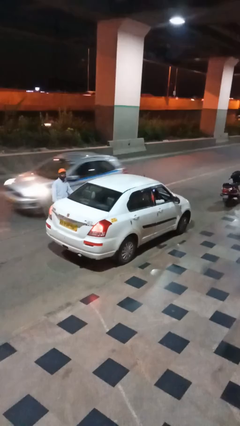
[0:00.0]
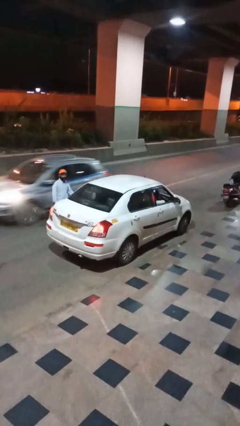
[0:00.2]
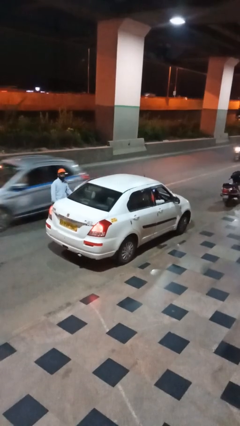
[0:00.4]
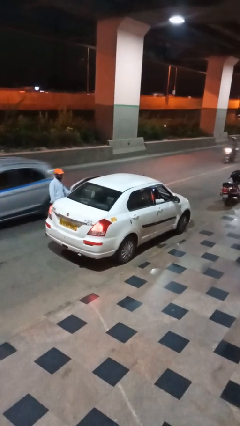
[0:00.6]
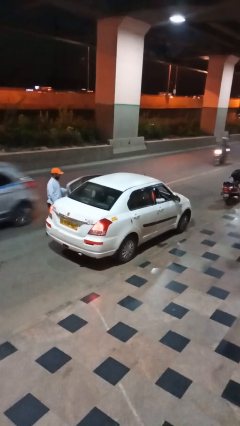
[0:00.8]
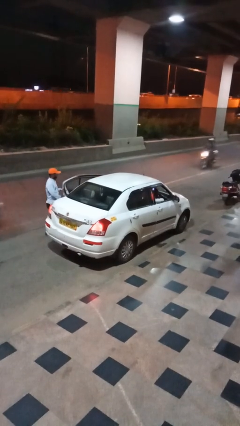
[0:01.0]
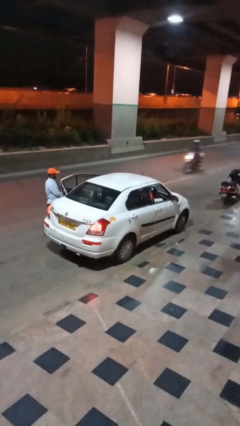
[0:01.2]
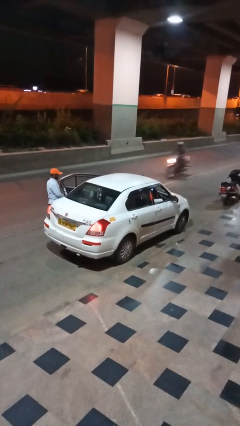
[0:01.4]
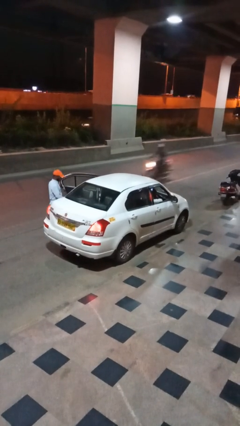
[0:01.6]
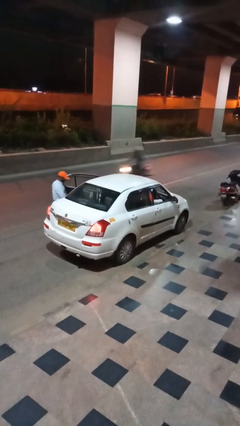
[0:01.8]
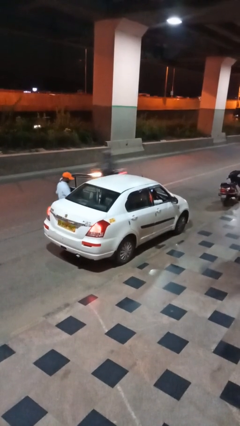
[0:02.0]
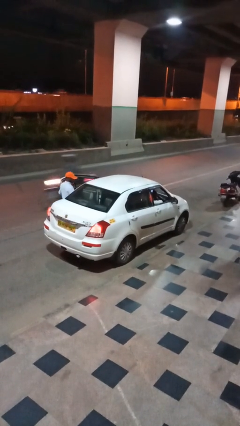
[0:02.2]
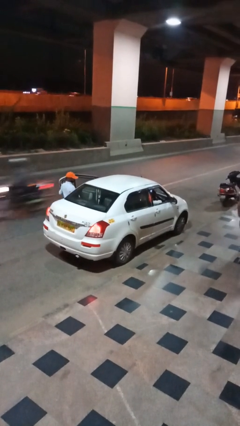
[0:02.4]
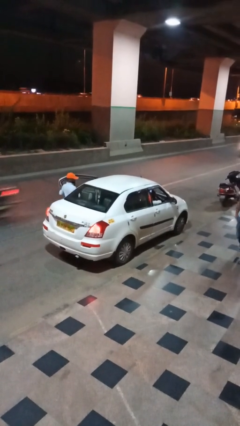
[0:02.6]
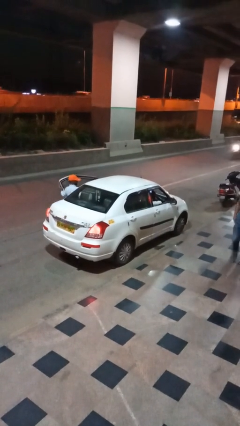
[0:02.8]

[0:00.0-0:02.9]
car picks up person

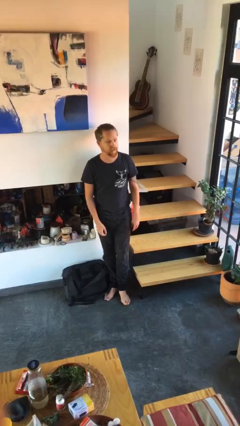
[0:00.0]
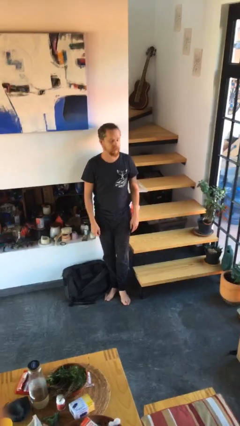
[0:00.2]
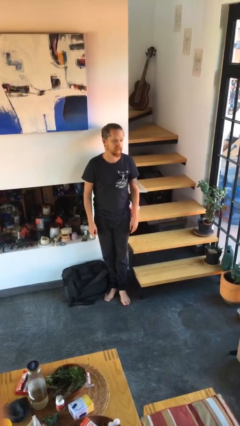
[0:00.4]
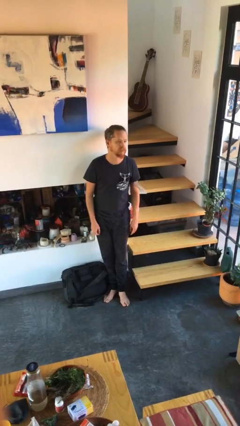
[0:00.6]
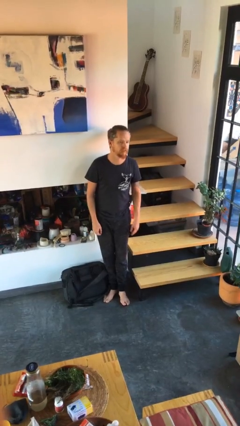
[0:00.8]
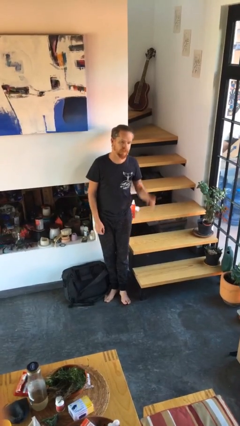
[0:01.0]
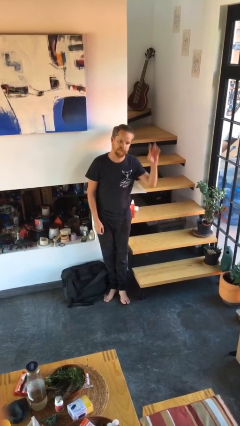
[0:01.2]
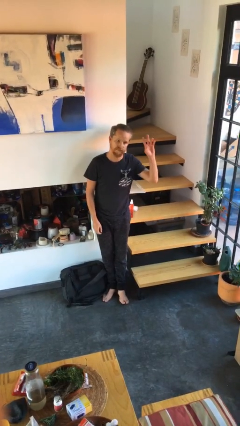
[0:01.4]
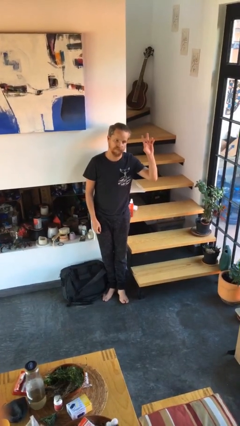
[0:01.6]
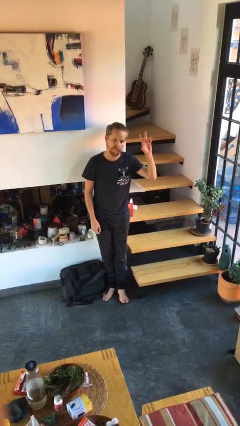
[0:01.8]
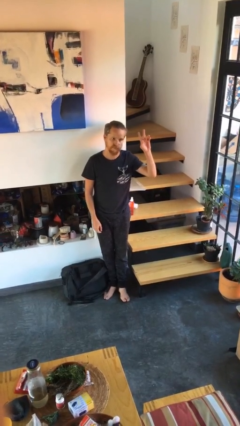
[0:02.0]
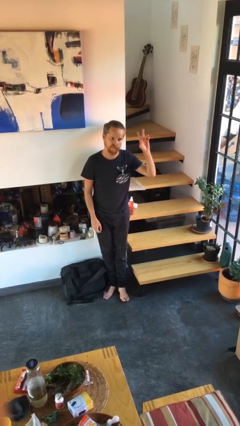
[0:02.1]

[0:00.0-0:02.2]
person gestures raise hand

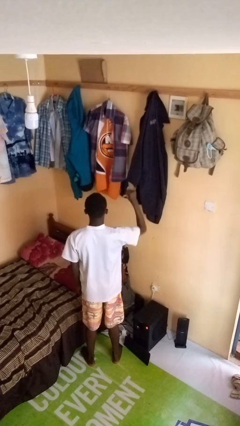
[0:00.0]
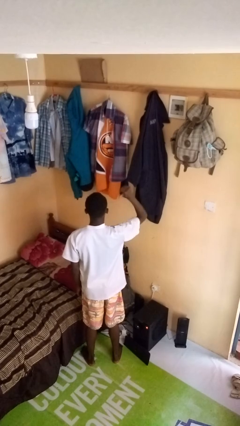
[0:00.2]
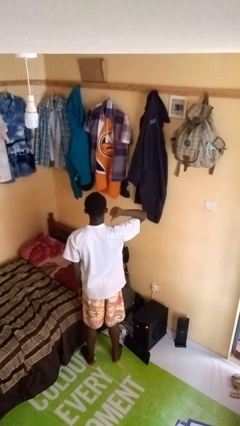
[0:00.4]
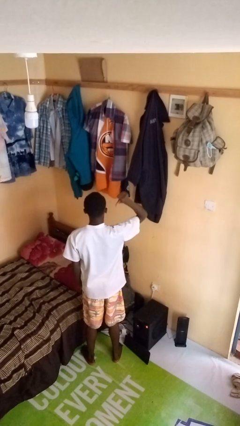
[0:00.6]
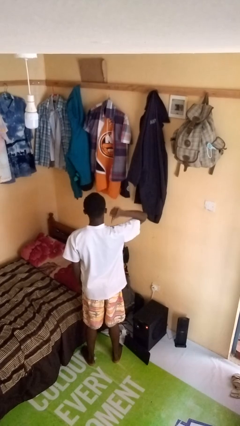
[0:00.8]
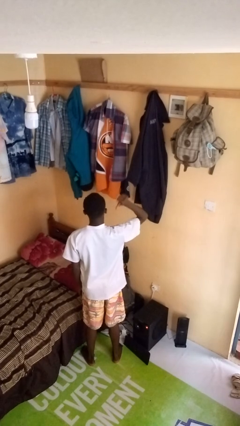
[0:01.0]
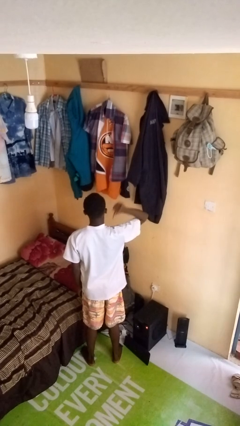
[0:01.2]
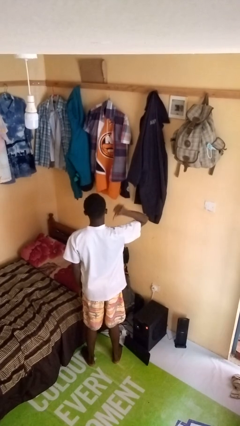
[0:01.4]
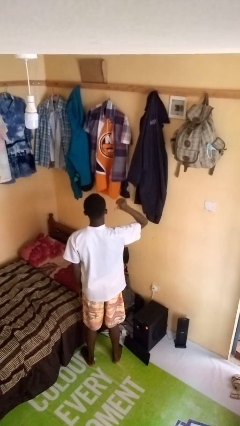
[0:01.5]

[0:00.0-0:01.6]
person gestures behind me

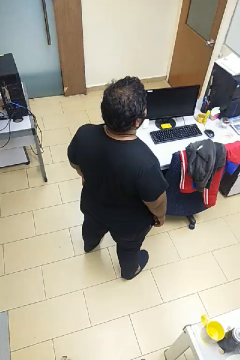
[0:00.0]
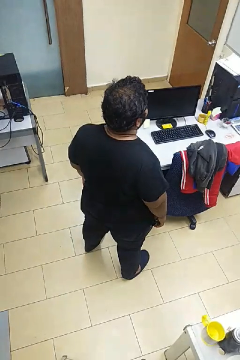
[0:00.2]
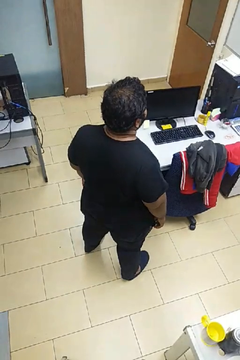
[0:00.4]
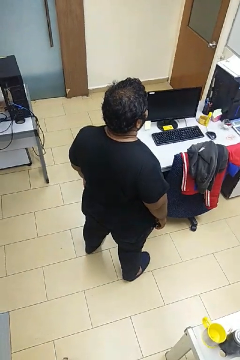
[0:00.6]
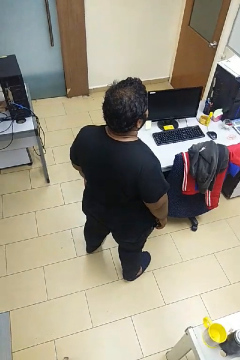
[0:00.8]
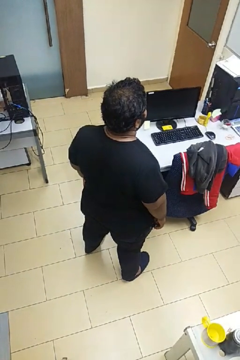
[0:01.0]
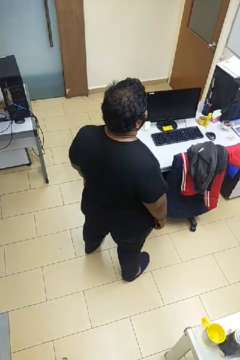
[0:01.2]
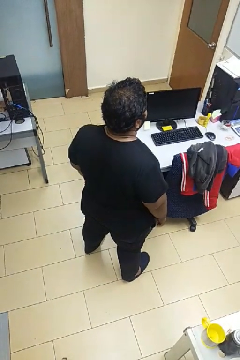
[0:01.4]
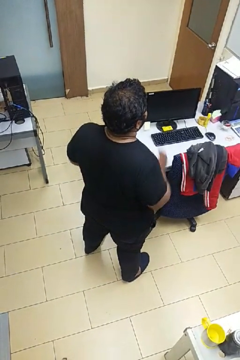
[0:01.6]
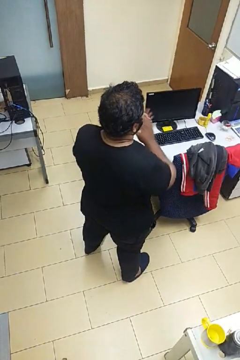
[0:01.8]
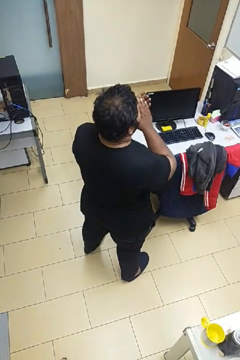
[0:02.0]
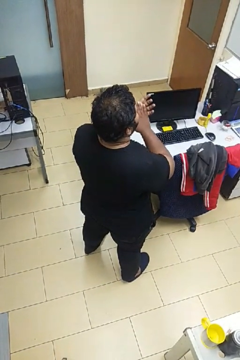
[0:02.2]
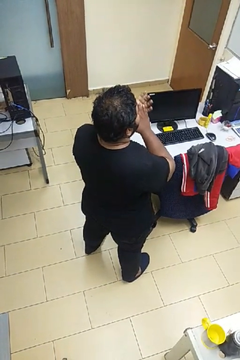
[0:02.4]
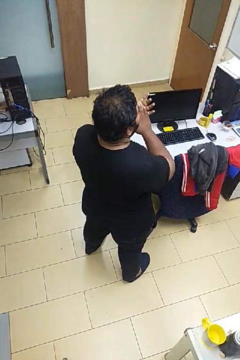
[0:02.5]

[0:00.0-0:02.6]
person claps hands

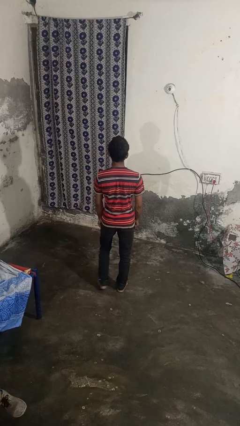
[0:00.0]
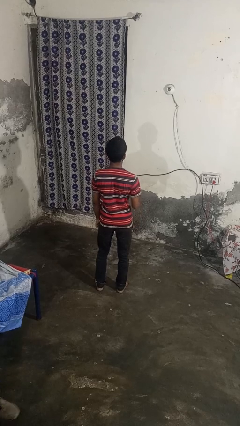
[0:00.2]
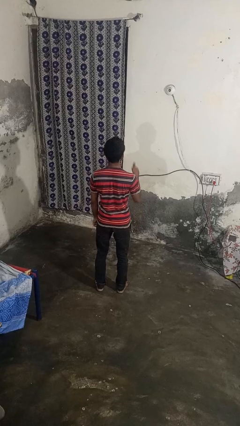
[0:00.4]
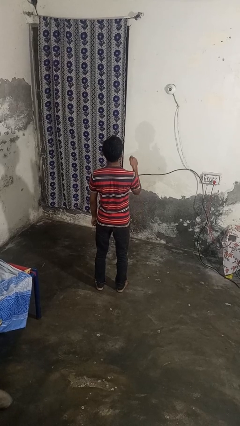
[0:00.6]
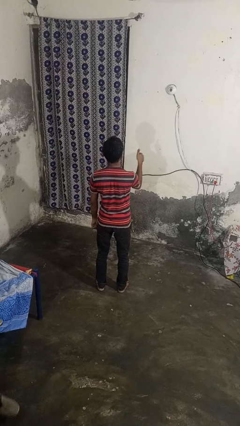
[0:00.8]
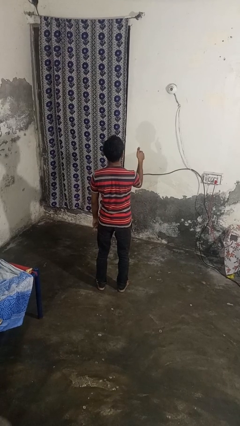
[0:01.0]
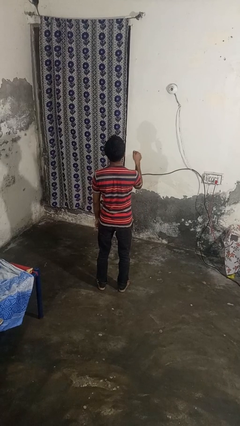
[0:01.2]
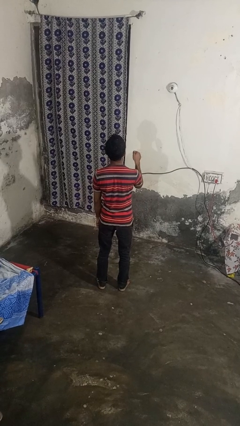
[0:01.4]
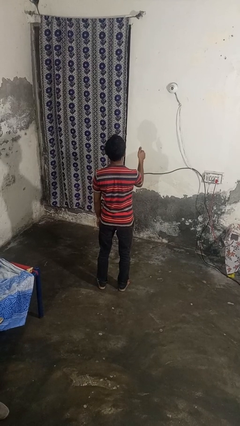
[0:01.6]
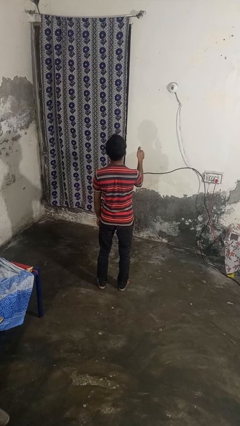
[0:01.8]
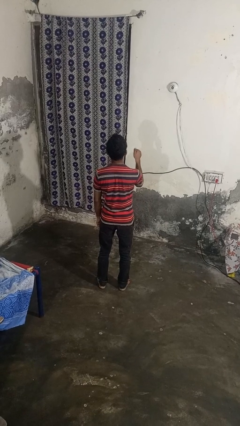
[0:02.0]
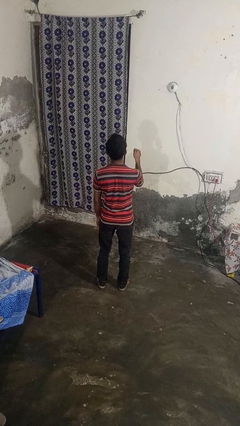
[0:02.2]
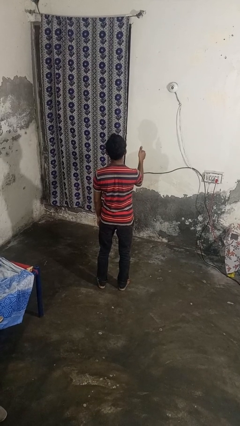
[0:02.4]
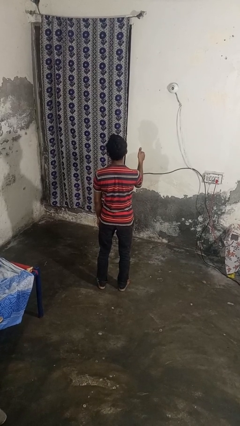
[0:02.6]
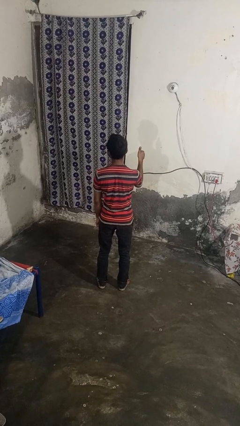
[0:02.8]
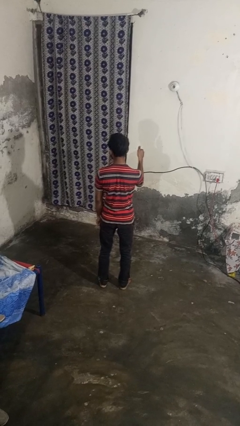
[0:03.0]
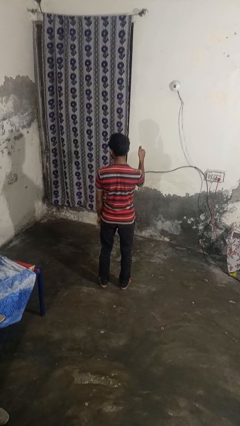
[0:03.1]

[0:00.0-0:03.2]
person gestures thumbs up

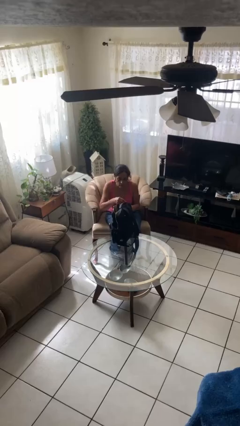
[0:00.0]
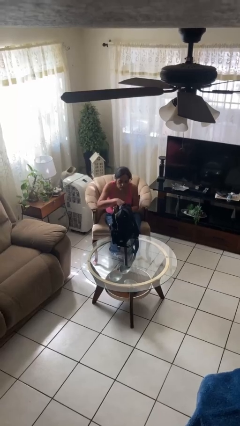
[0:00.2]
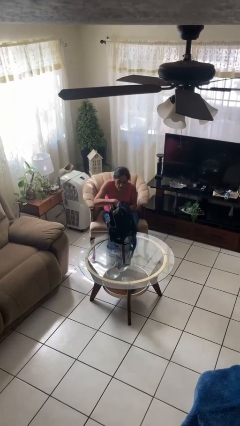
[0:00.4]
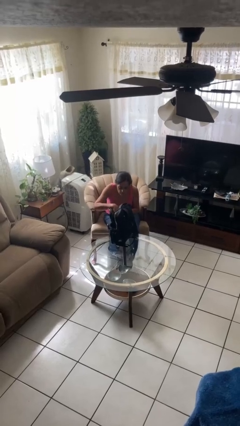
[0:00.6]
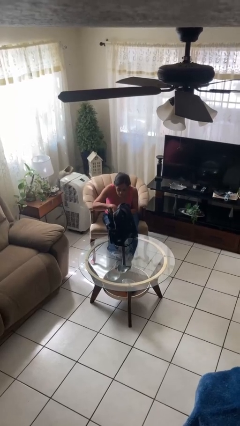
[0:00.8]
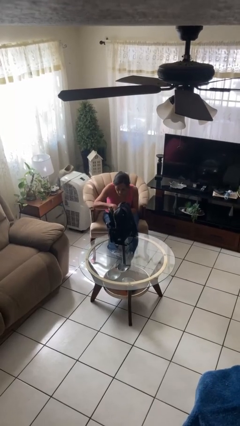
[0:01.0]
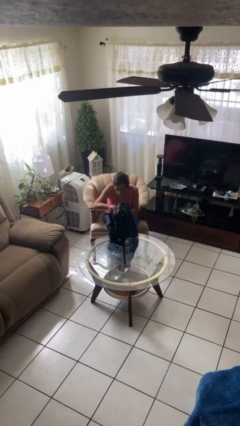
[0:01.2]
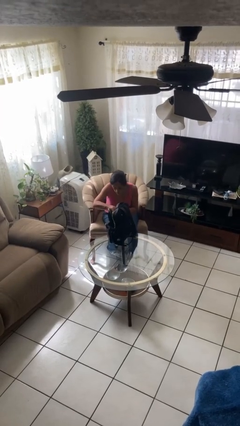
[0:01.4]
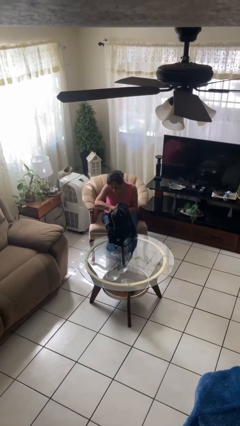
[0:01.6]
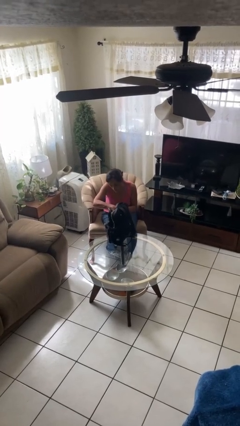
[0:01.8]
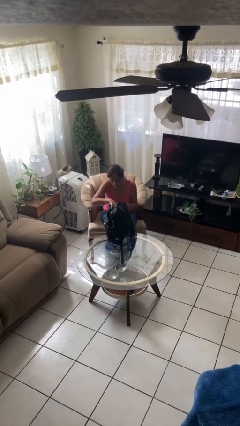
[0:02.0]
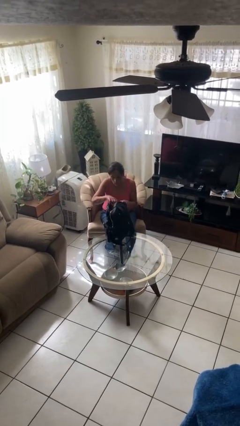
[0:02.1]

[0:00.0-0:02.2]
person searches in backpack

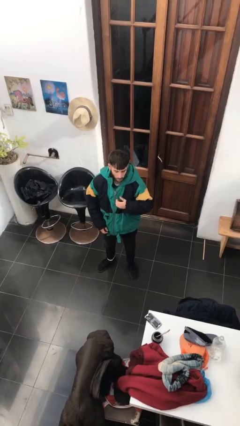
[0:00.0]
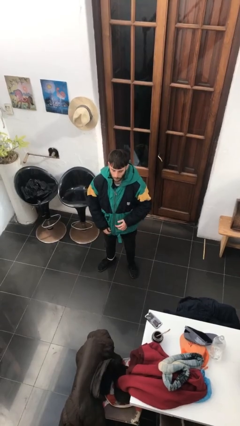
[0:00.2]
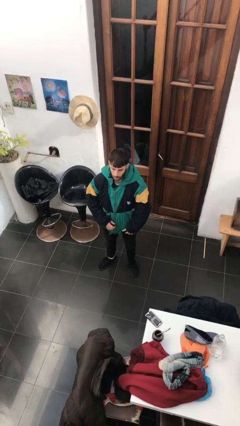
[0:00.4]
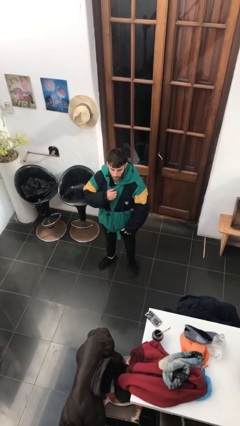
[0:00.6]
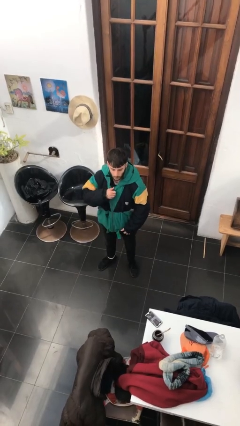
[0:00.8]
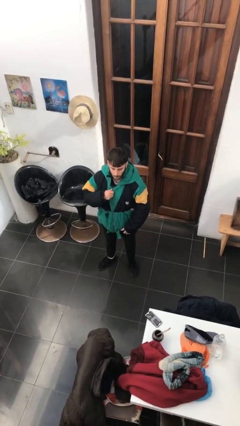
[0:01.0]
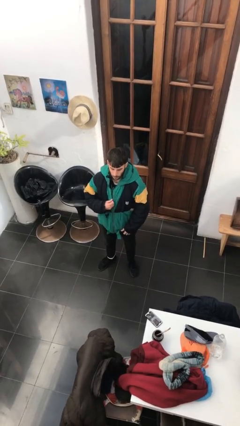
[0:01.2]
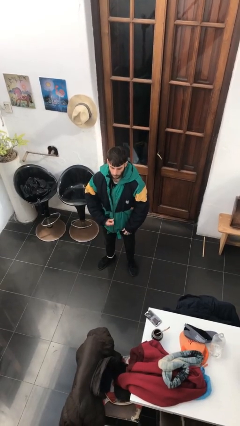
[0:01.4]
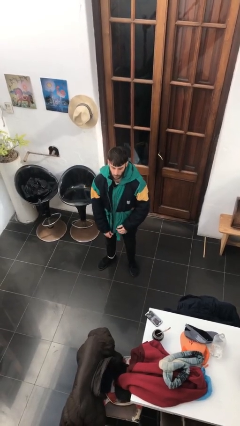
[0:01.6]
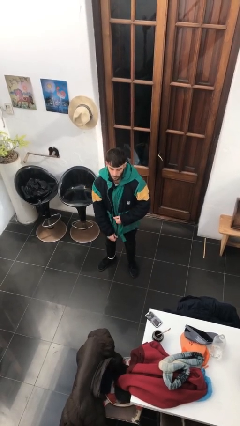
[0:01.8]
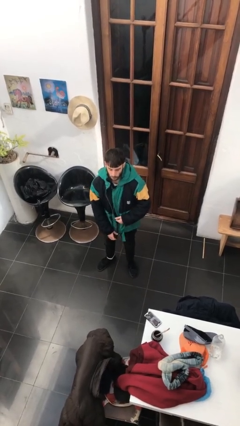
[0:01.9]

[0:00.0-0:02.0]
person unzips jacket

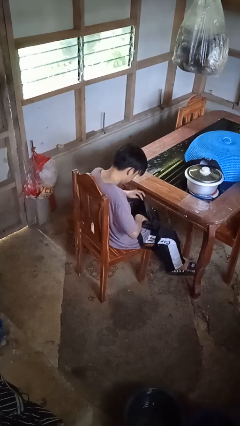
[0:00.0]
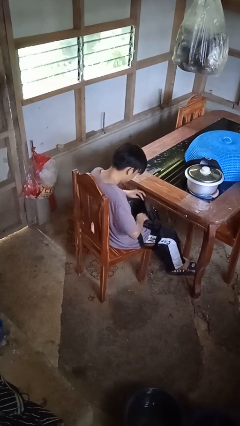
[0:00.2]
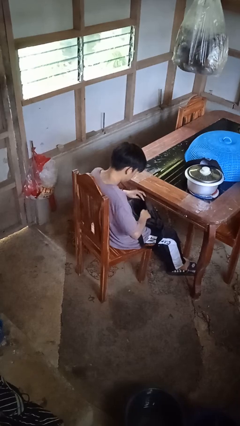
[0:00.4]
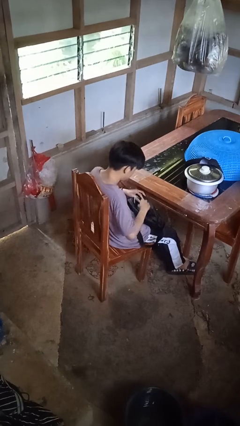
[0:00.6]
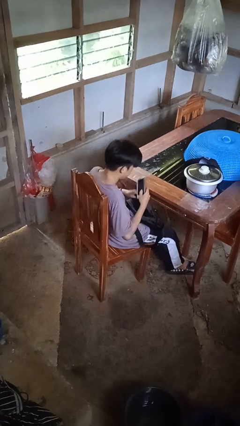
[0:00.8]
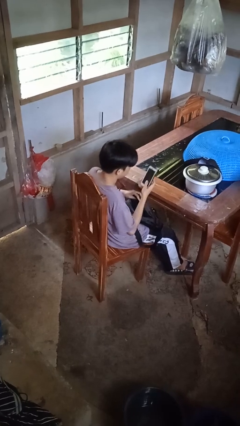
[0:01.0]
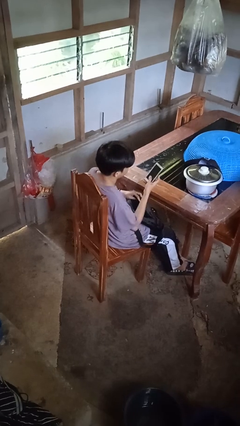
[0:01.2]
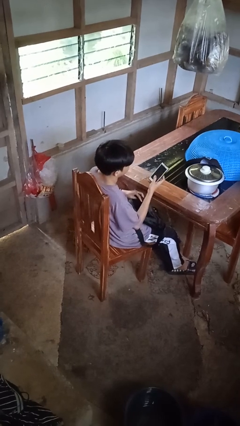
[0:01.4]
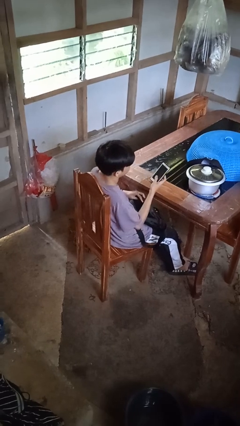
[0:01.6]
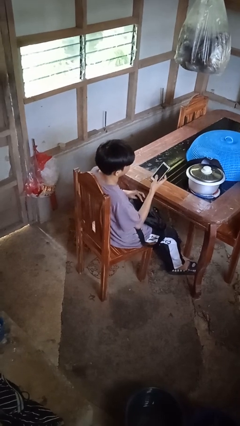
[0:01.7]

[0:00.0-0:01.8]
person takes object from purse
